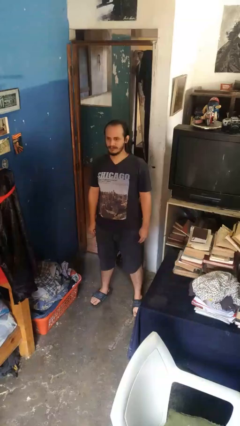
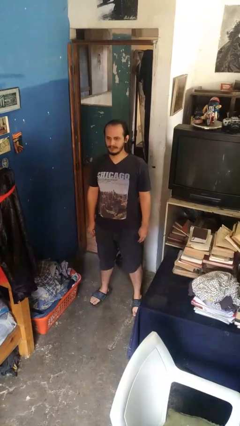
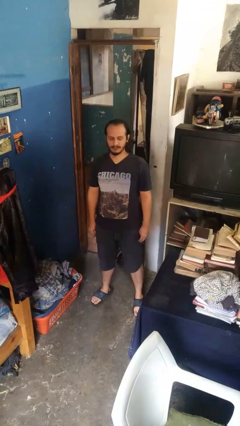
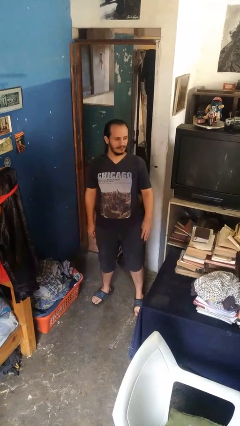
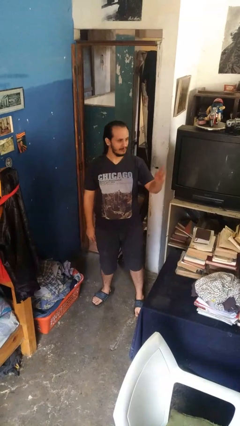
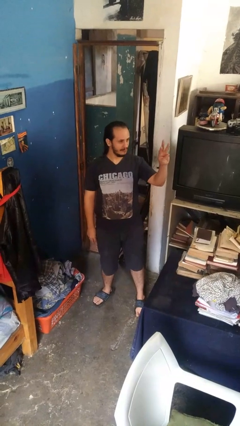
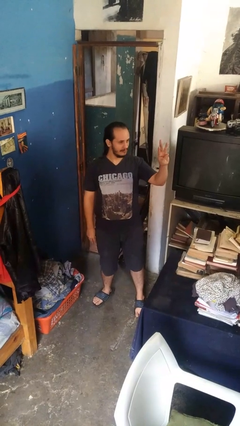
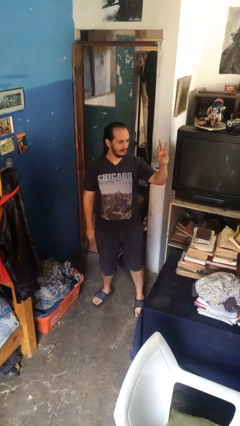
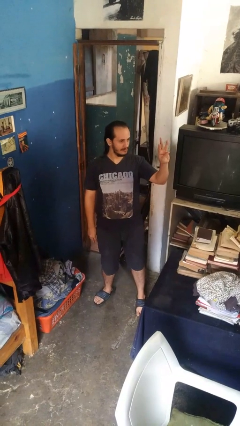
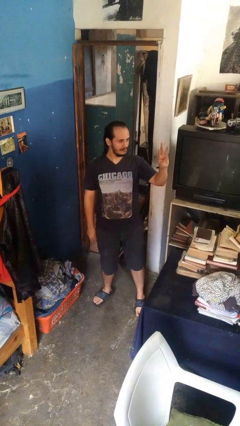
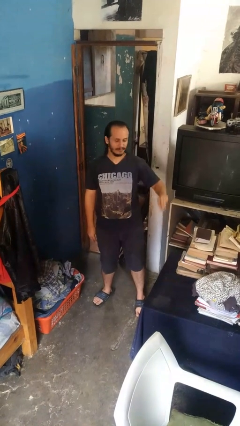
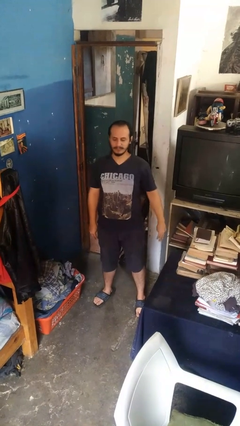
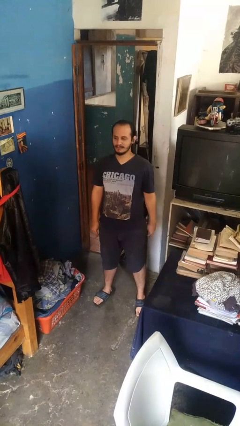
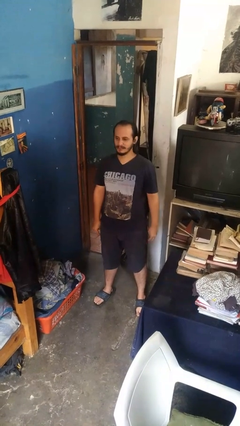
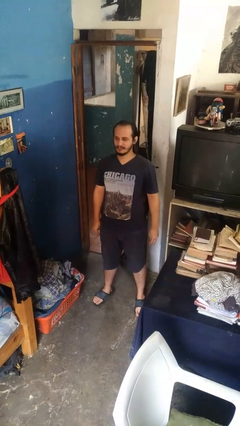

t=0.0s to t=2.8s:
person gestures number three

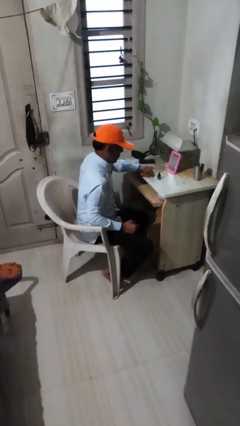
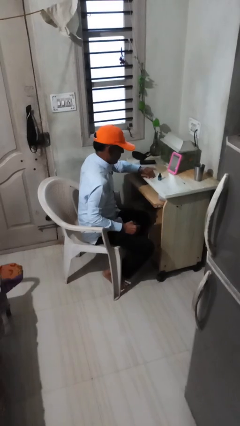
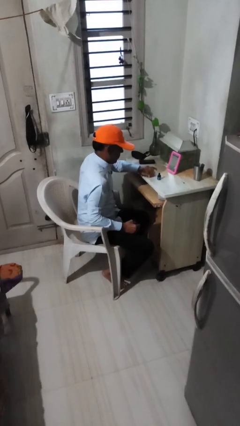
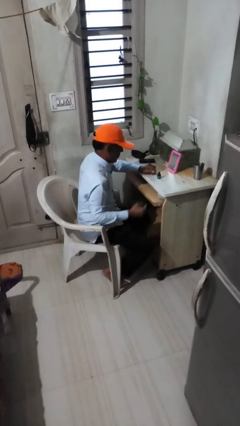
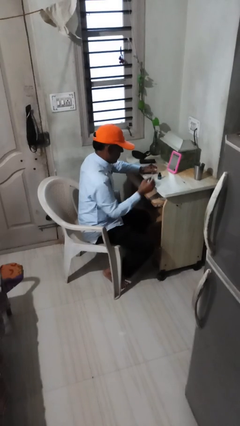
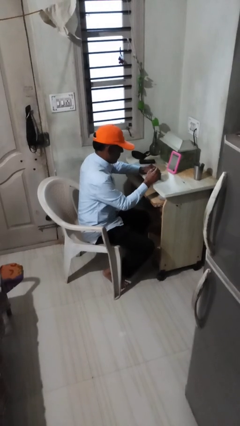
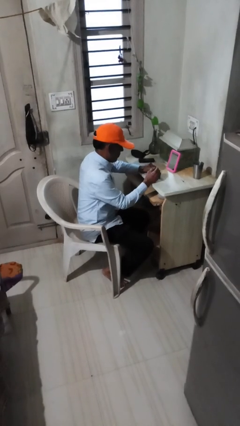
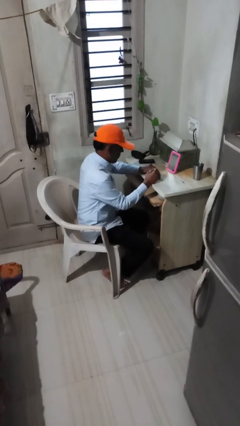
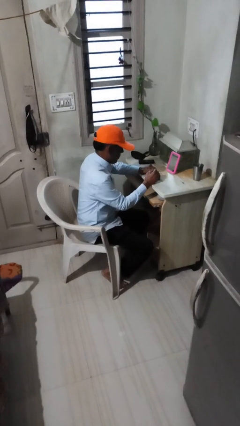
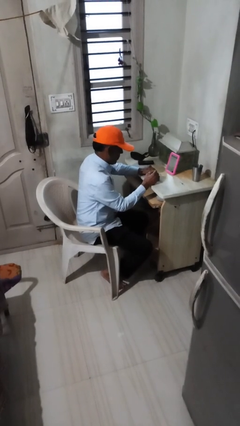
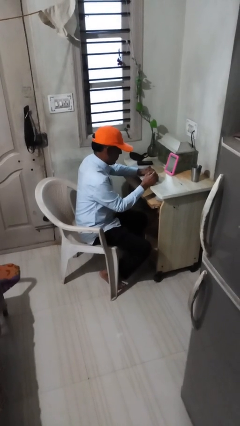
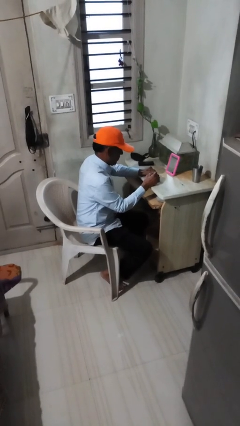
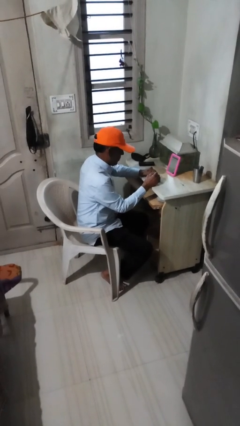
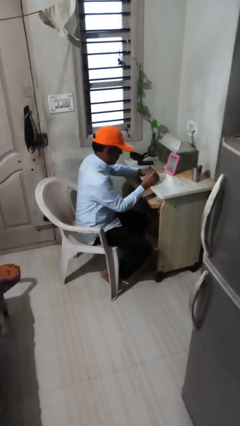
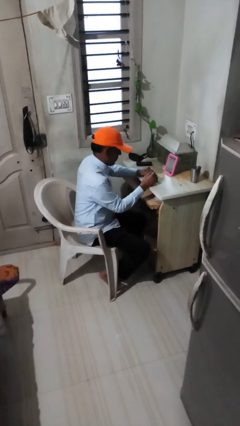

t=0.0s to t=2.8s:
person paints fingernails

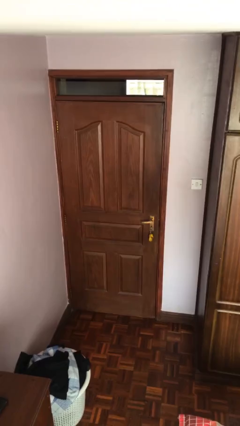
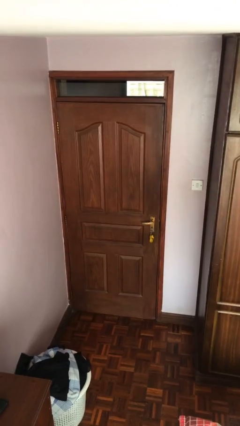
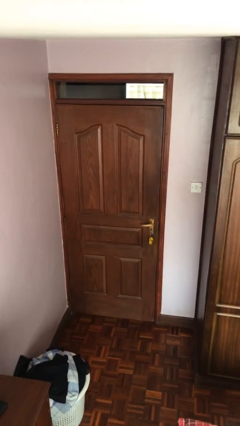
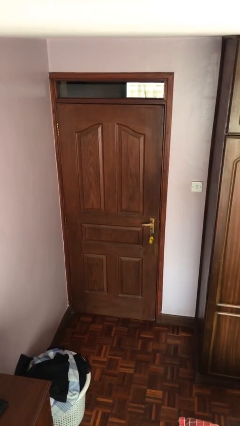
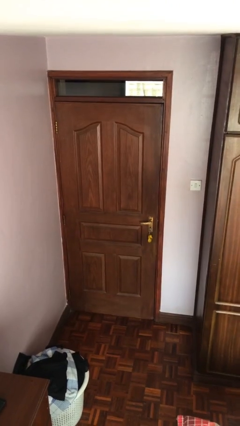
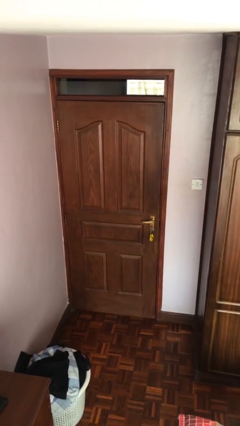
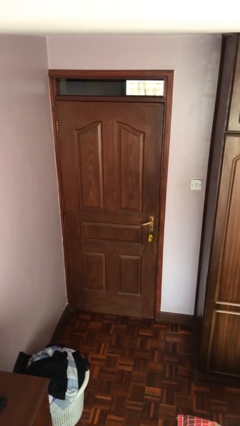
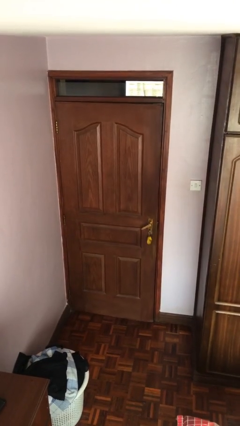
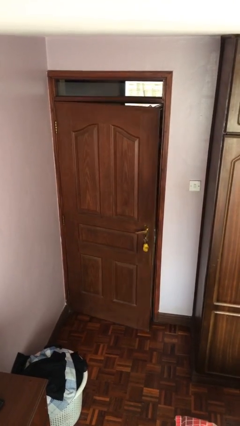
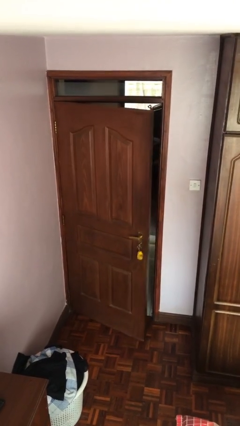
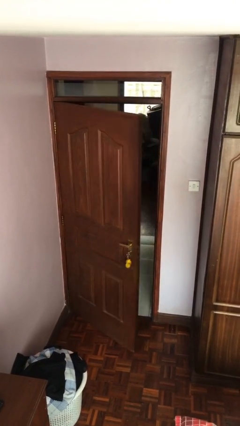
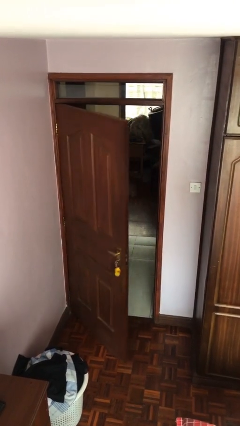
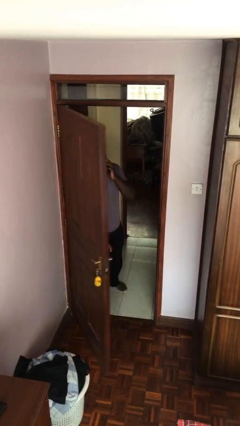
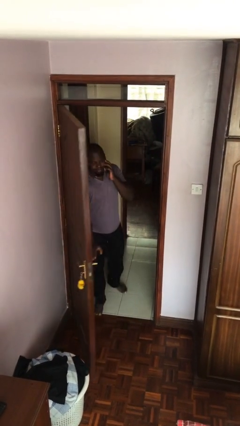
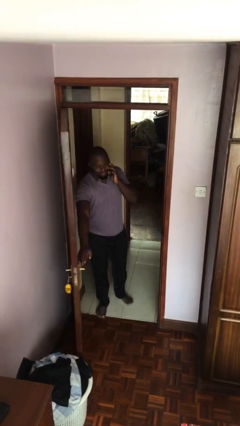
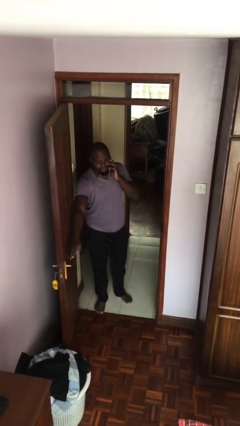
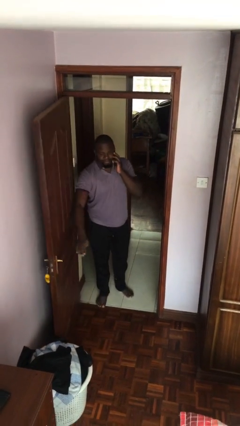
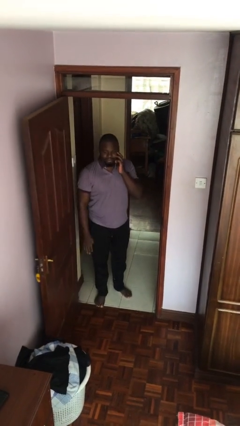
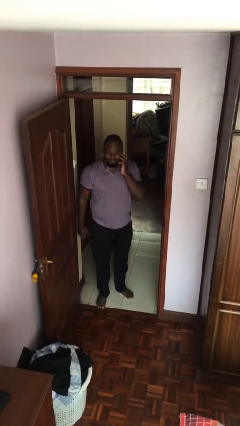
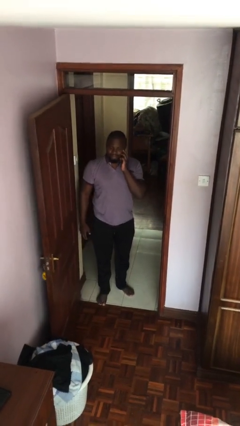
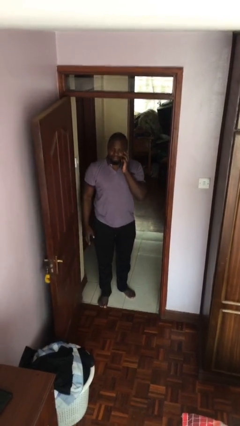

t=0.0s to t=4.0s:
person opens facility door

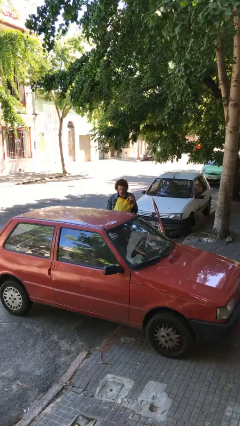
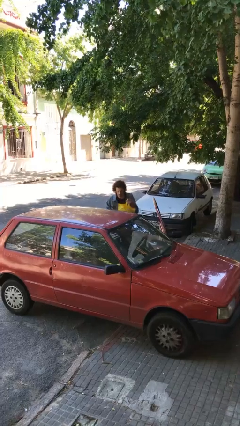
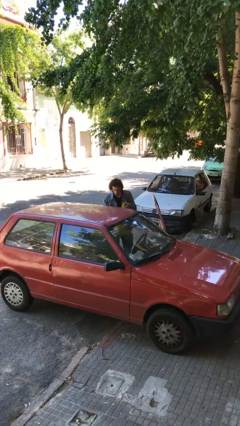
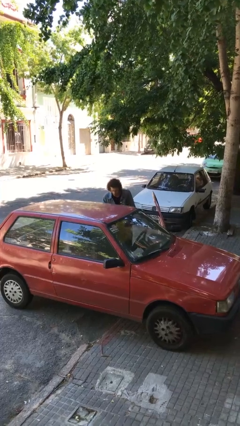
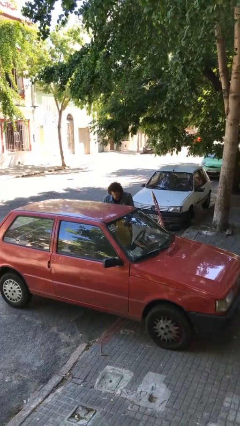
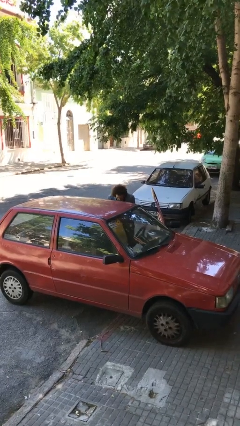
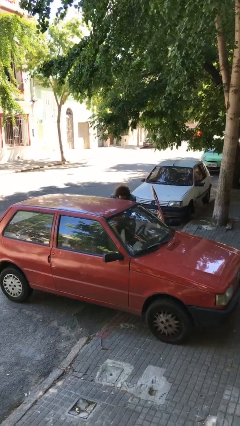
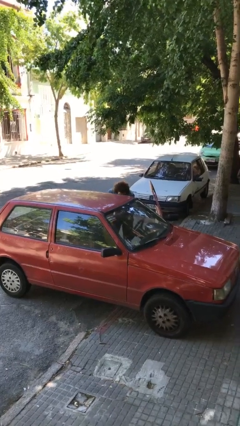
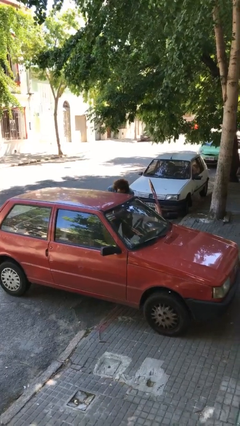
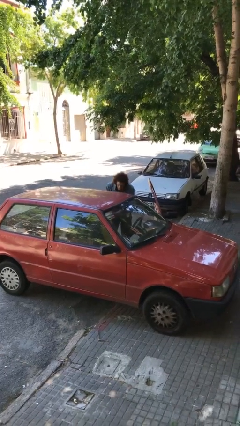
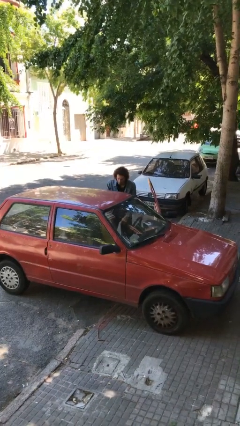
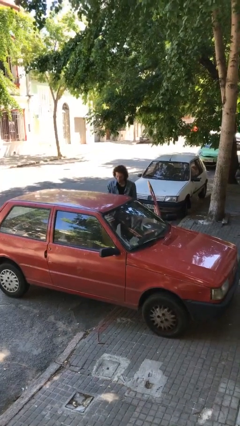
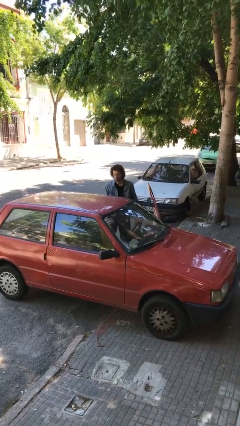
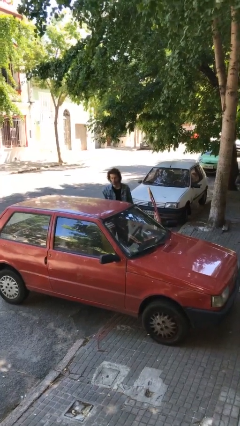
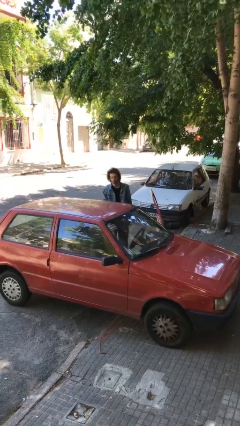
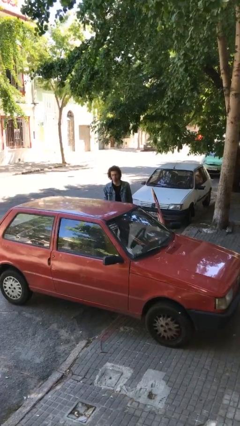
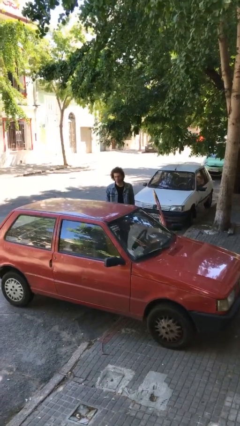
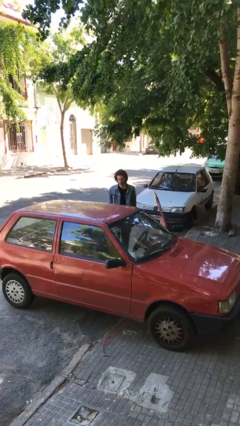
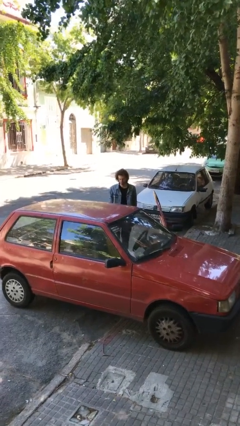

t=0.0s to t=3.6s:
person loads car

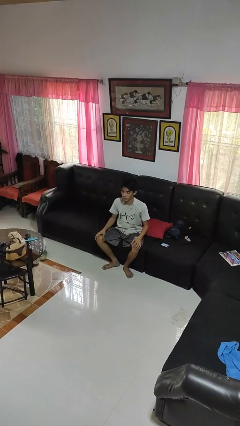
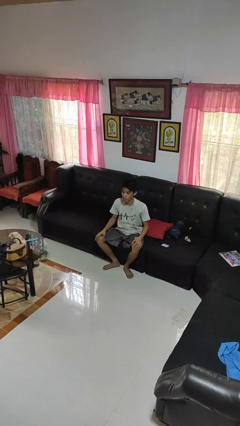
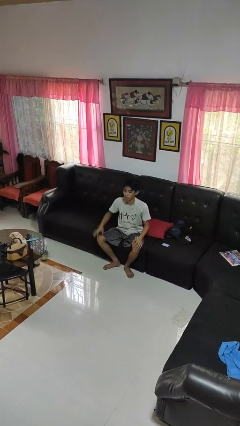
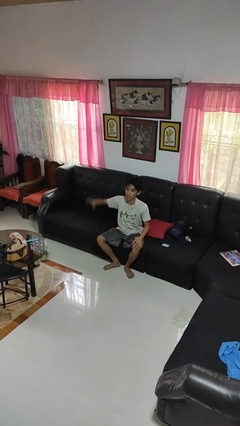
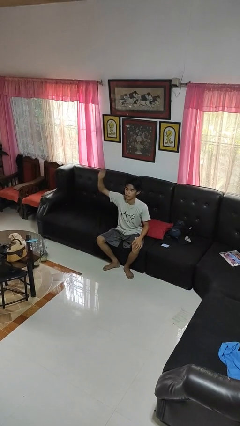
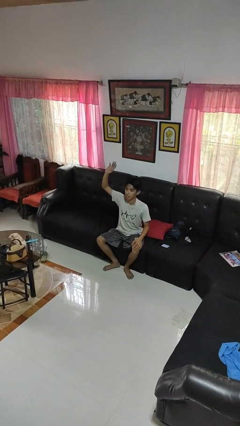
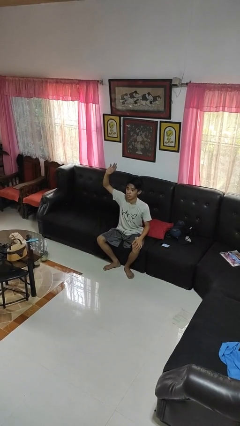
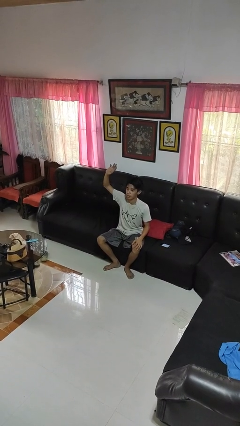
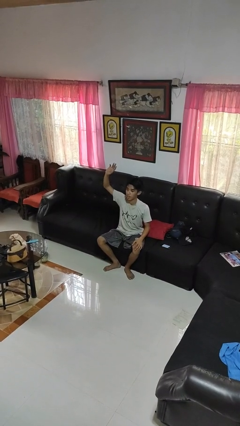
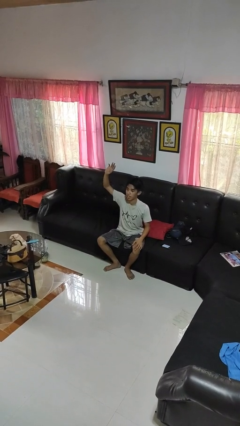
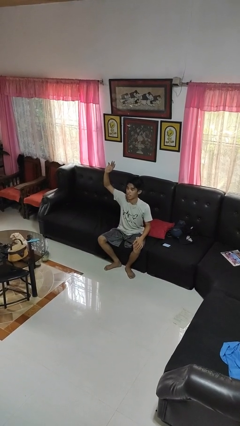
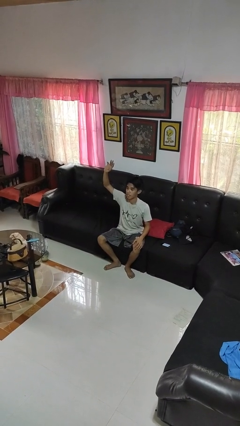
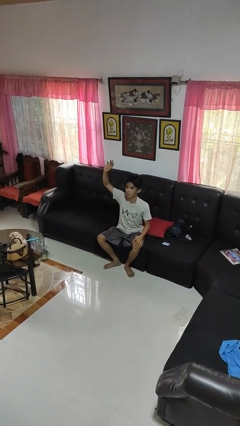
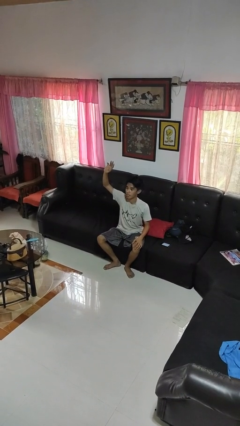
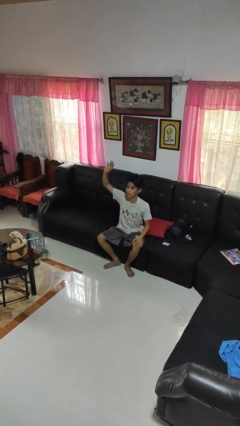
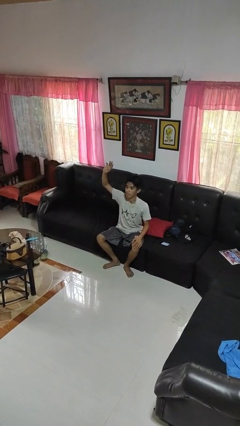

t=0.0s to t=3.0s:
person gestures raise hand

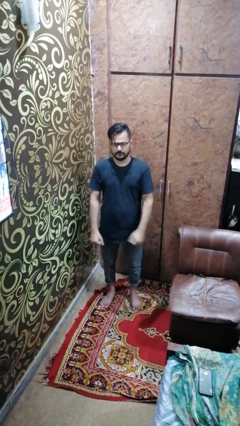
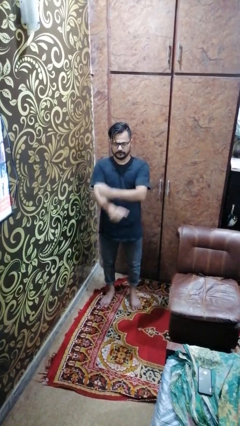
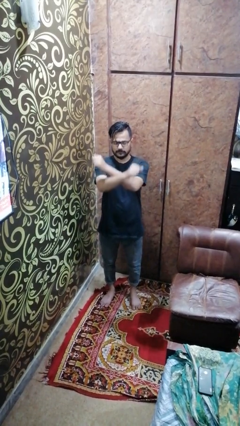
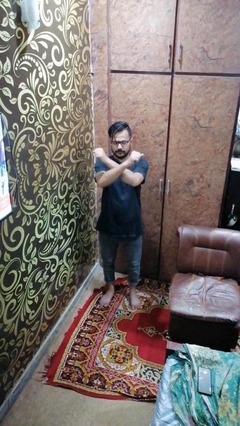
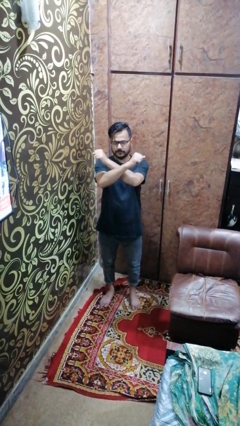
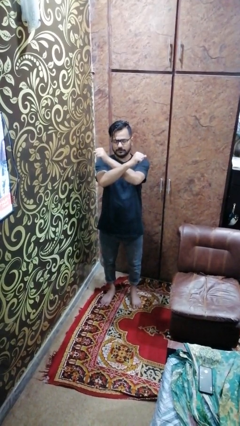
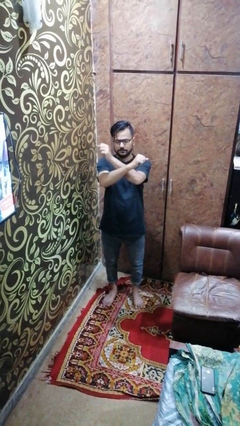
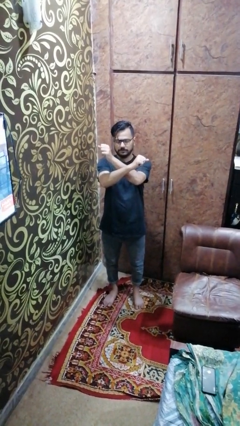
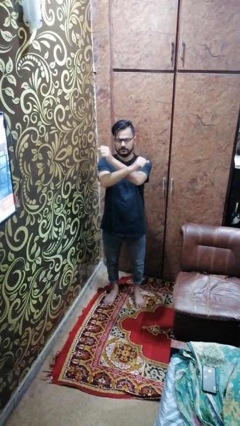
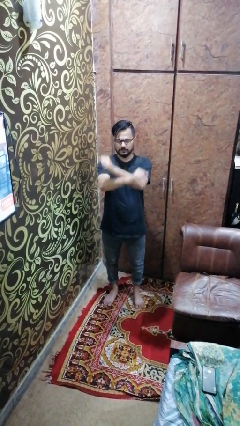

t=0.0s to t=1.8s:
person crosses arms
